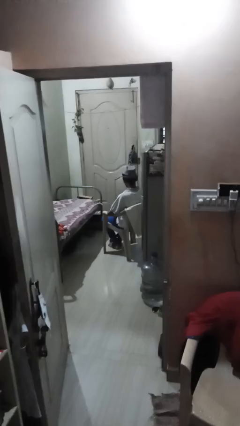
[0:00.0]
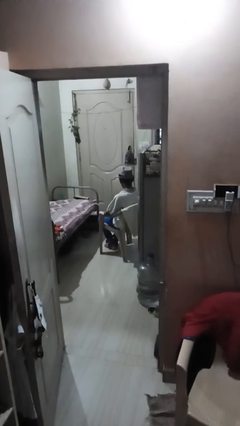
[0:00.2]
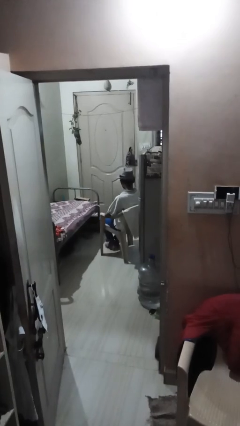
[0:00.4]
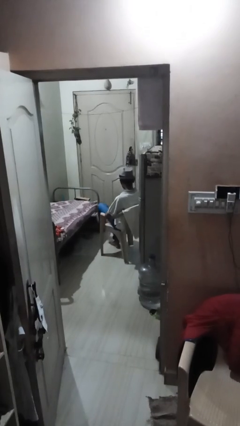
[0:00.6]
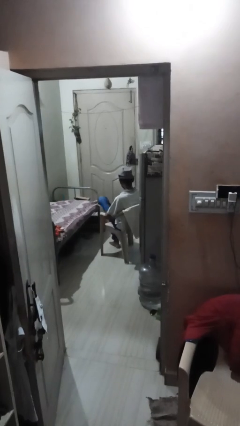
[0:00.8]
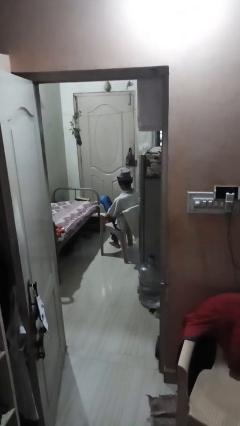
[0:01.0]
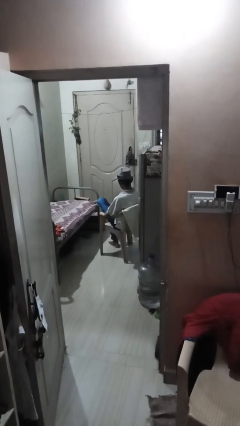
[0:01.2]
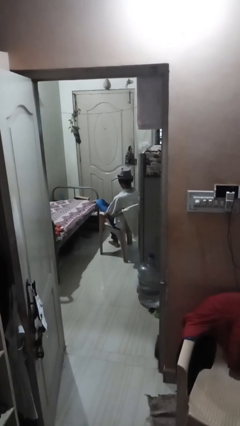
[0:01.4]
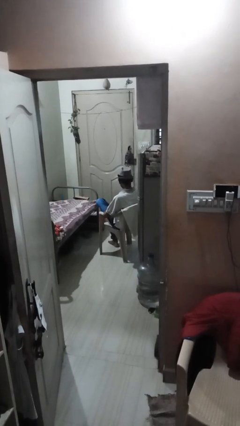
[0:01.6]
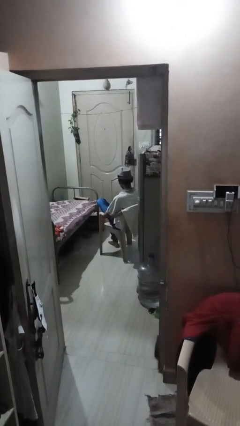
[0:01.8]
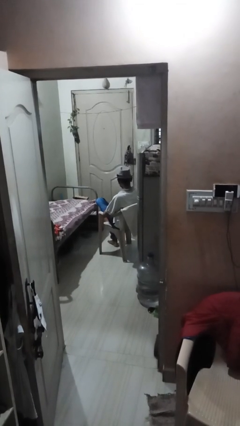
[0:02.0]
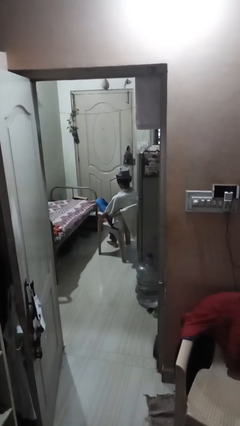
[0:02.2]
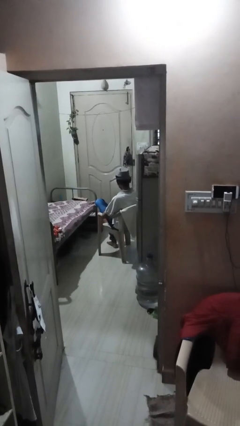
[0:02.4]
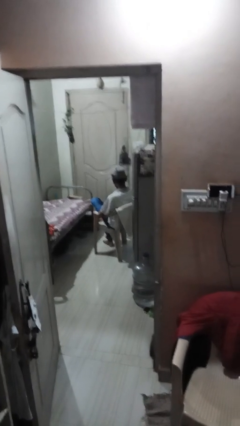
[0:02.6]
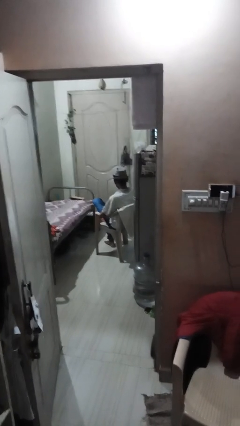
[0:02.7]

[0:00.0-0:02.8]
person crosses legs

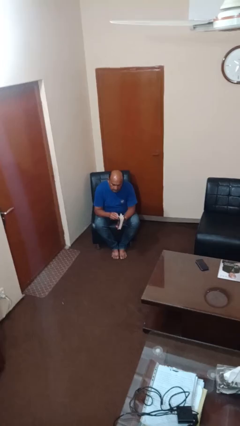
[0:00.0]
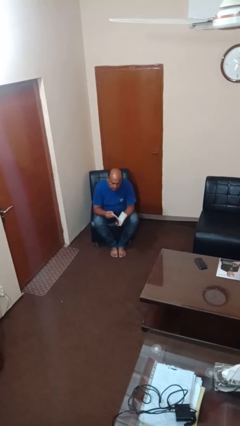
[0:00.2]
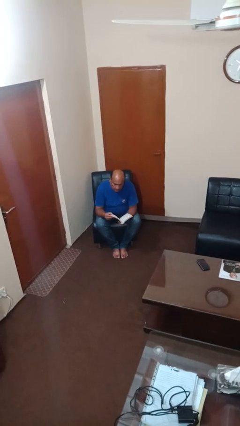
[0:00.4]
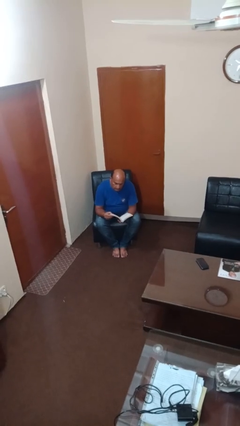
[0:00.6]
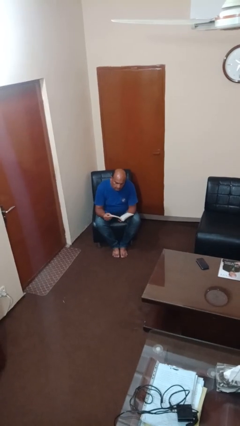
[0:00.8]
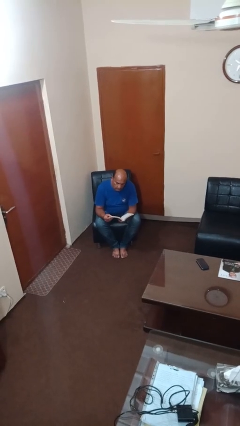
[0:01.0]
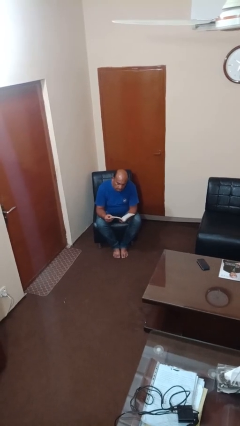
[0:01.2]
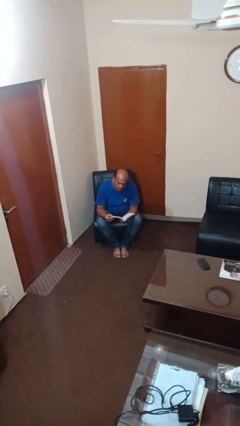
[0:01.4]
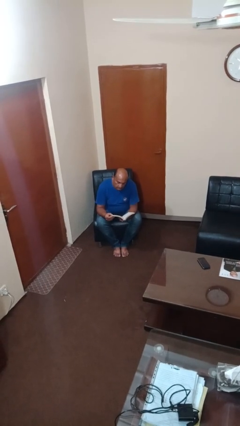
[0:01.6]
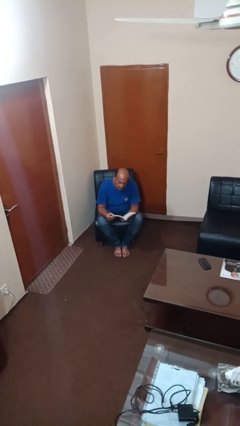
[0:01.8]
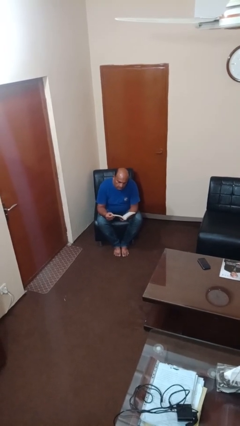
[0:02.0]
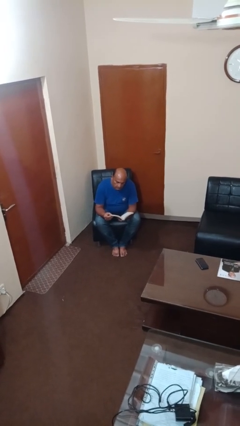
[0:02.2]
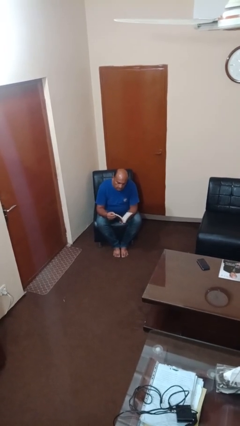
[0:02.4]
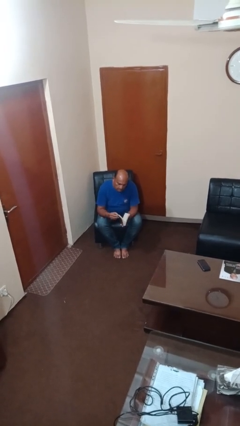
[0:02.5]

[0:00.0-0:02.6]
person reads book

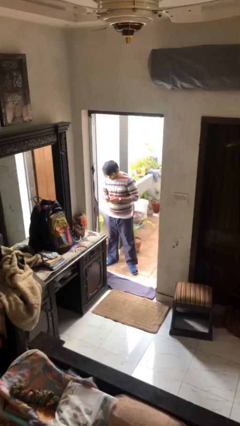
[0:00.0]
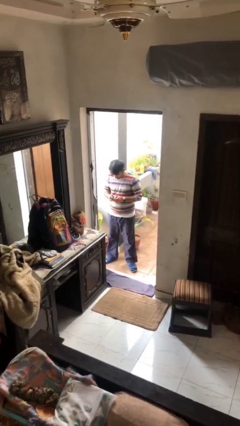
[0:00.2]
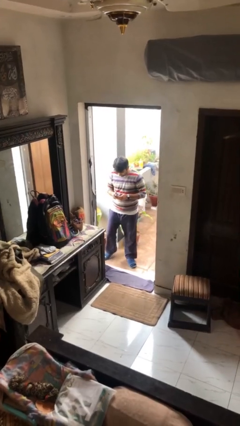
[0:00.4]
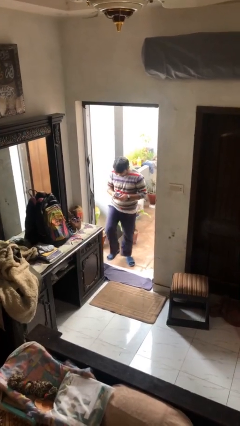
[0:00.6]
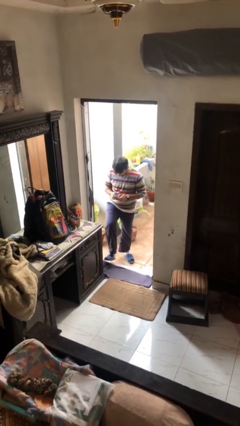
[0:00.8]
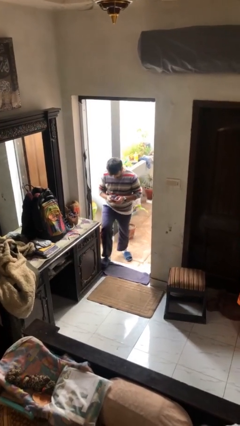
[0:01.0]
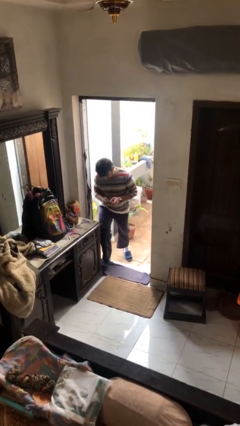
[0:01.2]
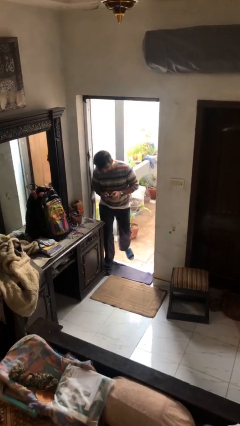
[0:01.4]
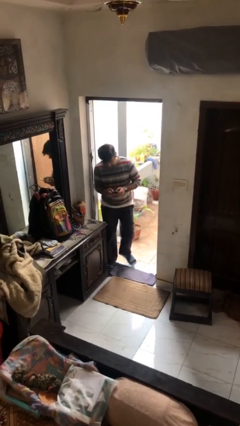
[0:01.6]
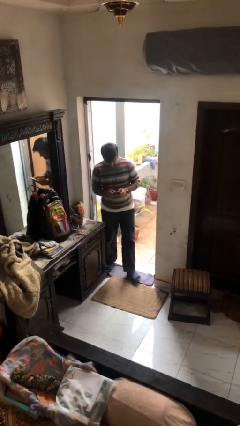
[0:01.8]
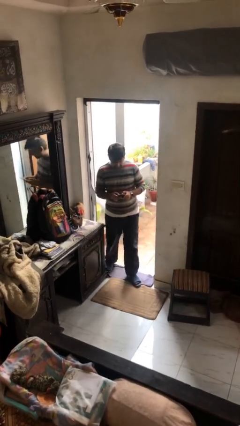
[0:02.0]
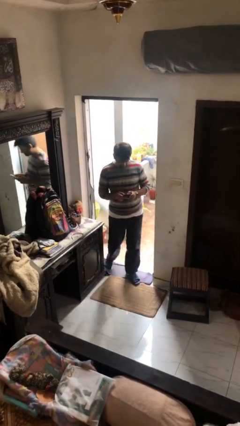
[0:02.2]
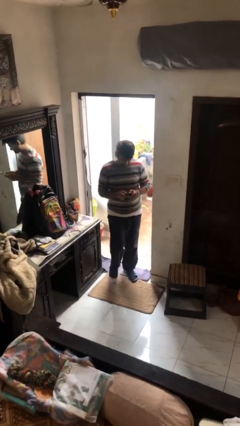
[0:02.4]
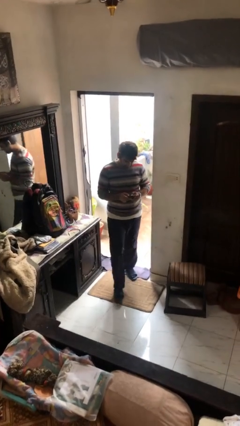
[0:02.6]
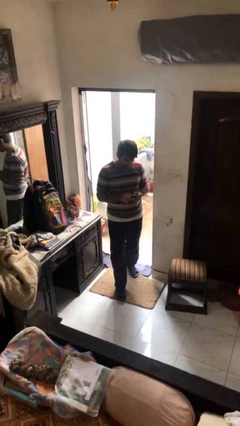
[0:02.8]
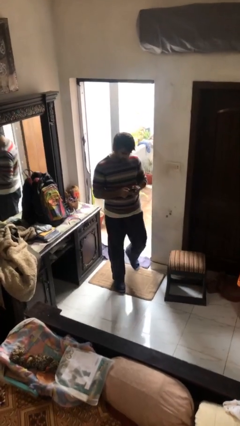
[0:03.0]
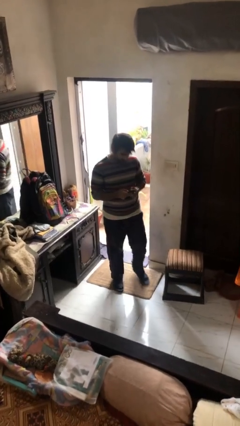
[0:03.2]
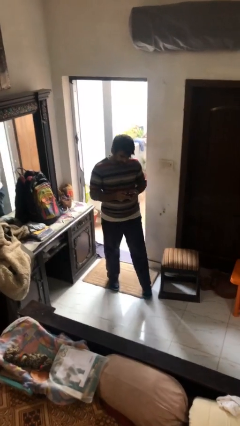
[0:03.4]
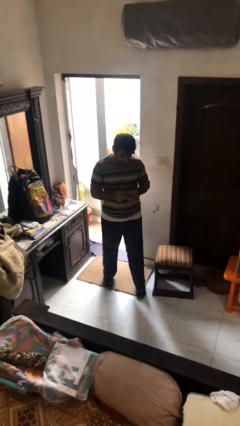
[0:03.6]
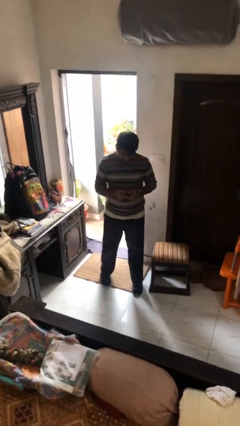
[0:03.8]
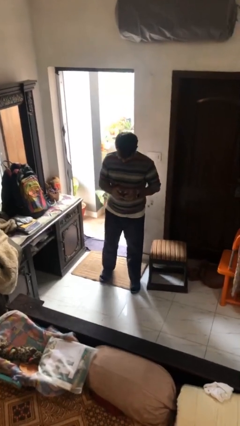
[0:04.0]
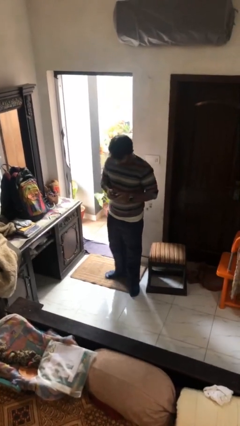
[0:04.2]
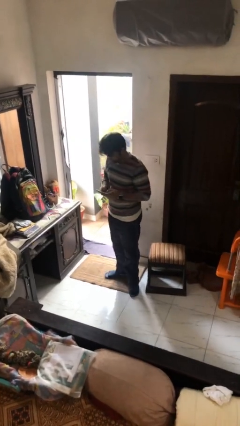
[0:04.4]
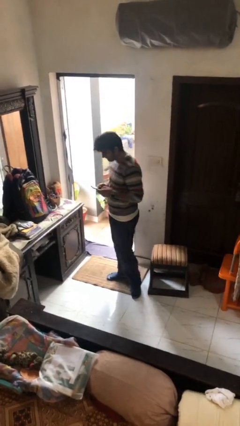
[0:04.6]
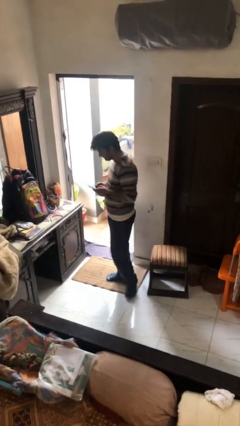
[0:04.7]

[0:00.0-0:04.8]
person enters scene through structure

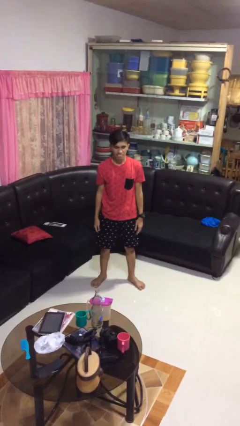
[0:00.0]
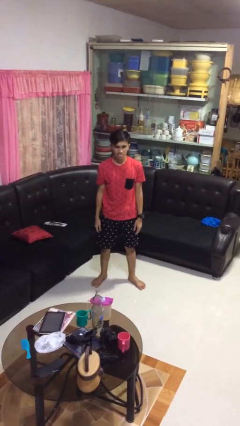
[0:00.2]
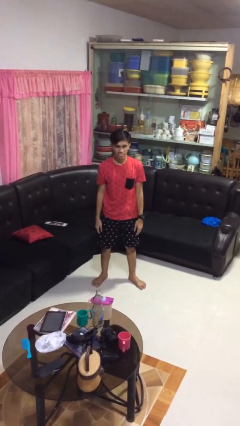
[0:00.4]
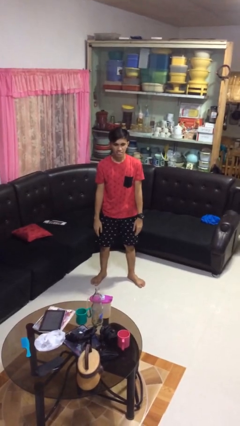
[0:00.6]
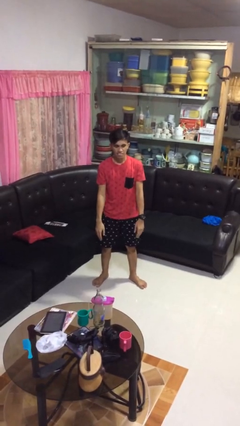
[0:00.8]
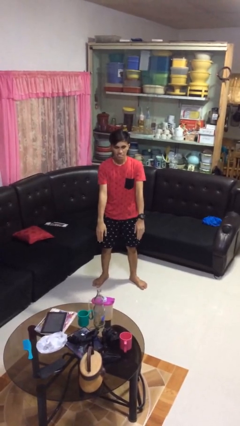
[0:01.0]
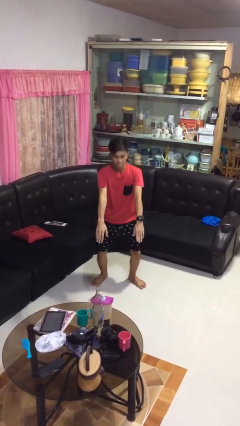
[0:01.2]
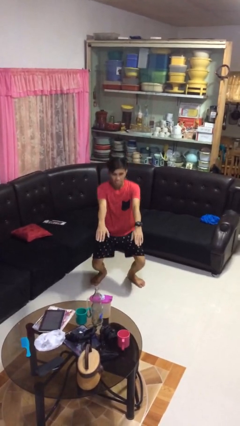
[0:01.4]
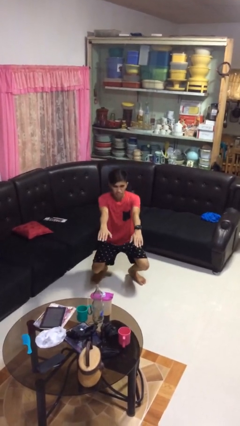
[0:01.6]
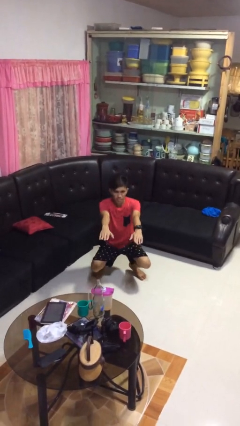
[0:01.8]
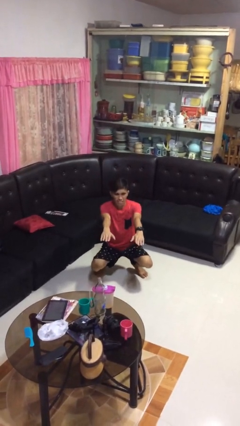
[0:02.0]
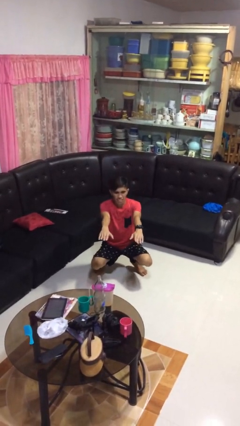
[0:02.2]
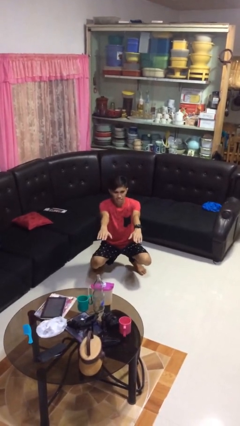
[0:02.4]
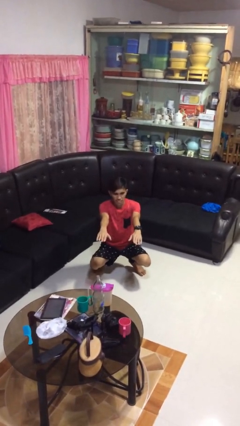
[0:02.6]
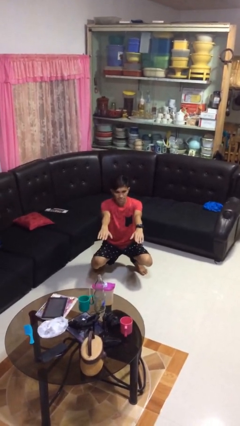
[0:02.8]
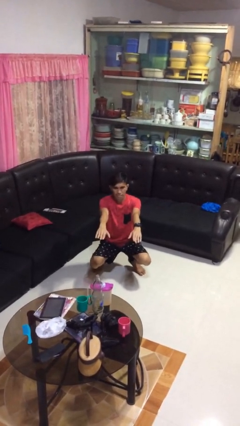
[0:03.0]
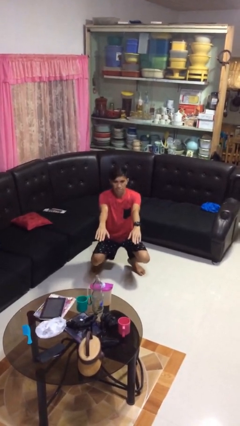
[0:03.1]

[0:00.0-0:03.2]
person squats

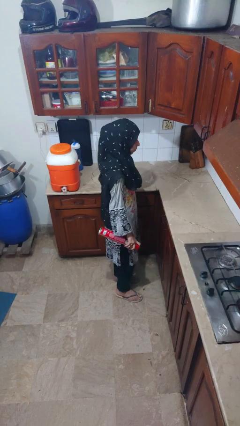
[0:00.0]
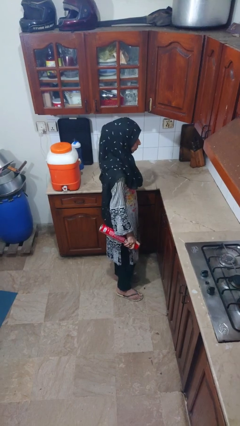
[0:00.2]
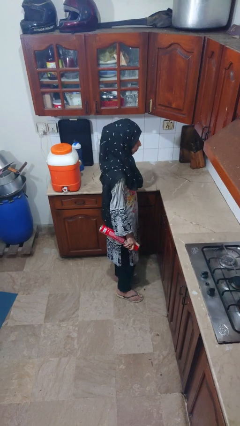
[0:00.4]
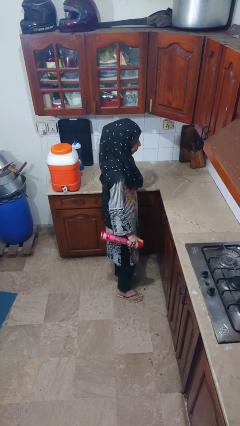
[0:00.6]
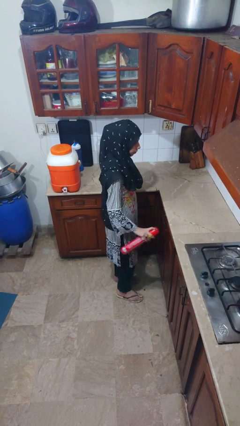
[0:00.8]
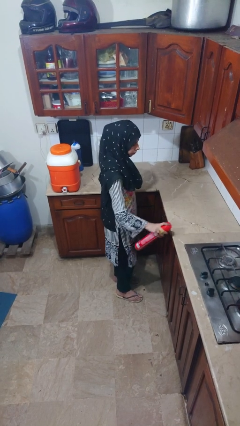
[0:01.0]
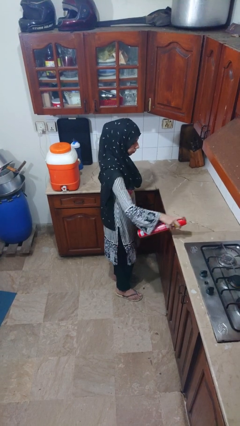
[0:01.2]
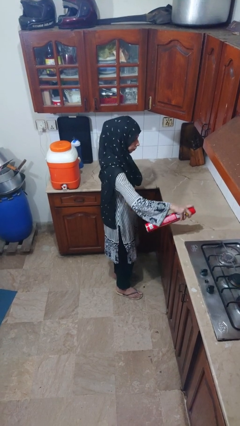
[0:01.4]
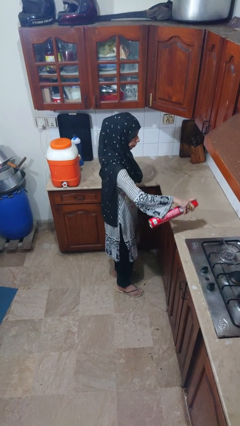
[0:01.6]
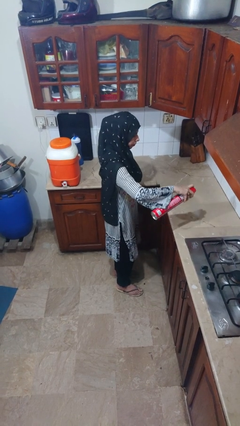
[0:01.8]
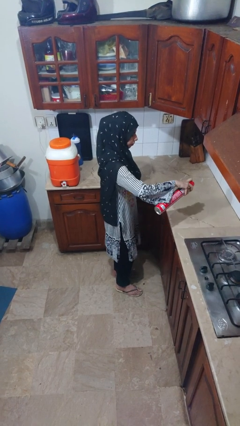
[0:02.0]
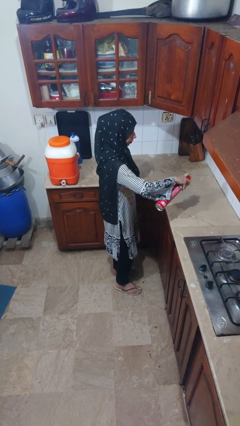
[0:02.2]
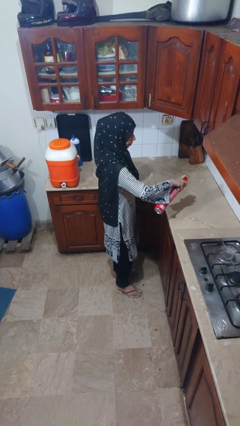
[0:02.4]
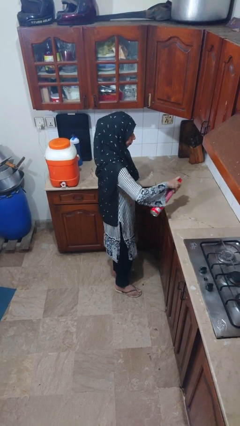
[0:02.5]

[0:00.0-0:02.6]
person sprays from bottle

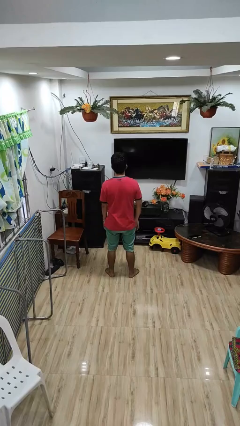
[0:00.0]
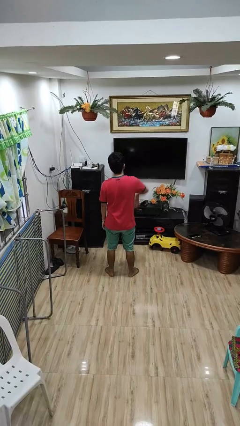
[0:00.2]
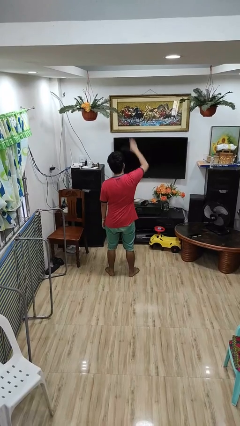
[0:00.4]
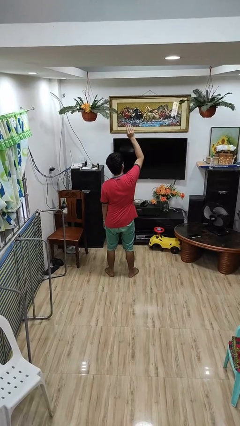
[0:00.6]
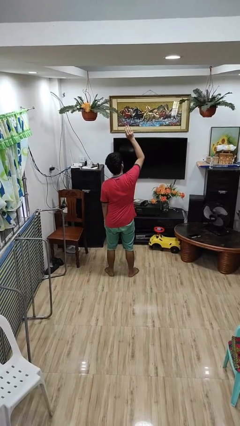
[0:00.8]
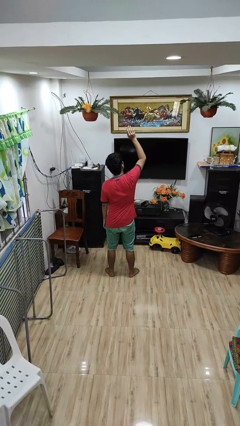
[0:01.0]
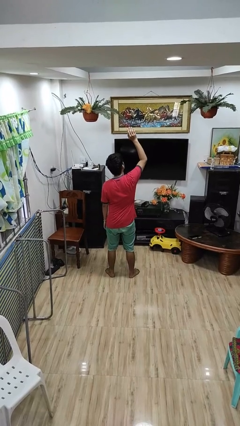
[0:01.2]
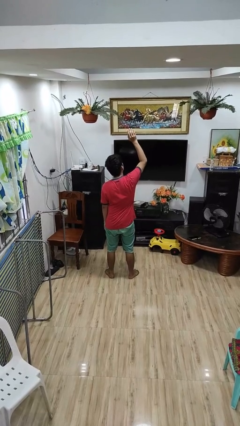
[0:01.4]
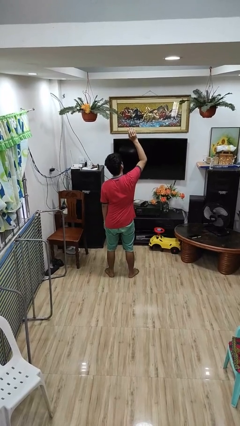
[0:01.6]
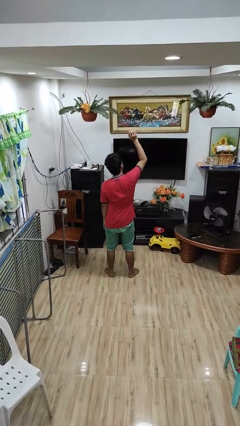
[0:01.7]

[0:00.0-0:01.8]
person gestures swipe up

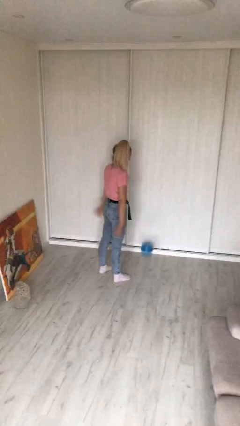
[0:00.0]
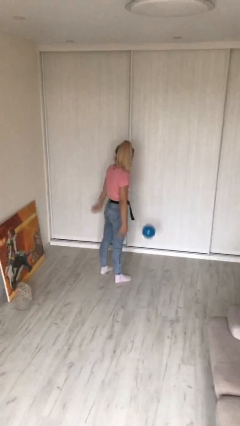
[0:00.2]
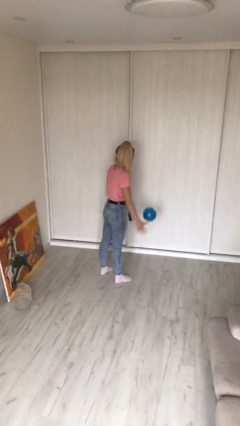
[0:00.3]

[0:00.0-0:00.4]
person bounces ball on floor
